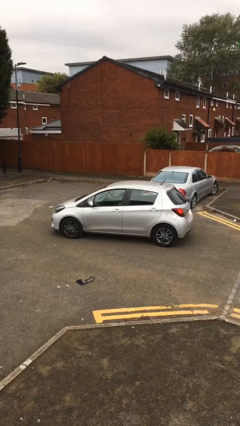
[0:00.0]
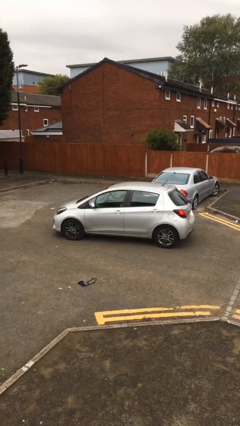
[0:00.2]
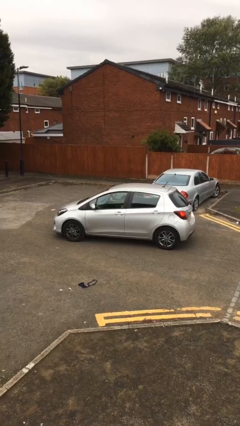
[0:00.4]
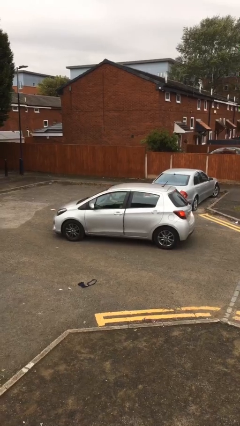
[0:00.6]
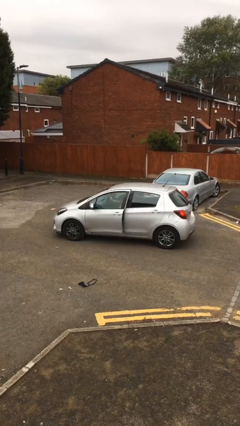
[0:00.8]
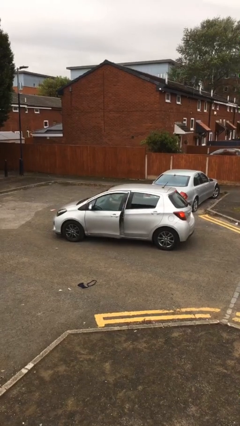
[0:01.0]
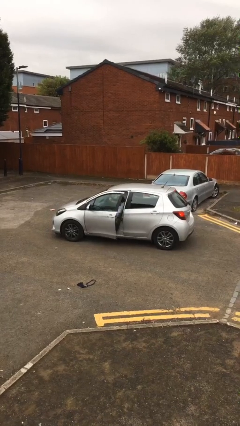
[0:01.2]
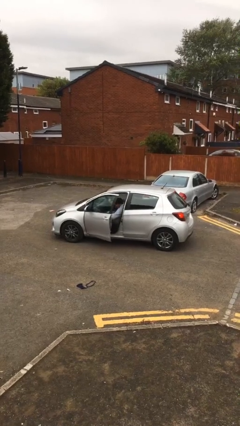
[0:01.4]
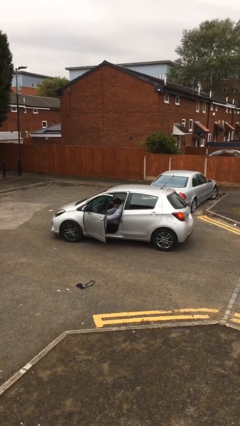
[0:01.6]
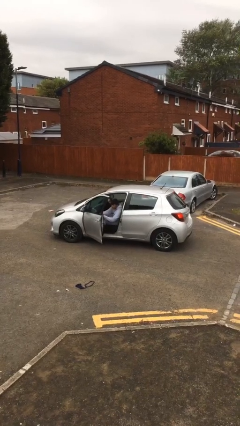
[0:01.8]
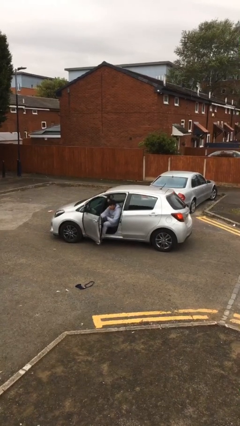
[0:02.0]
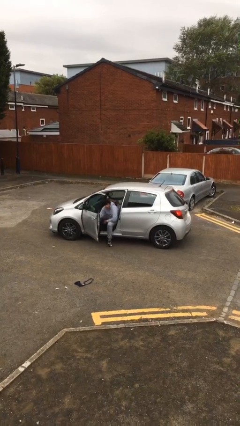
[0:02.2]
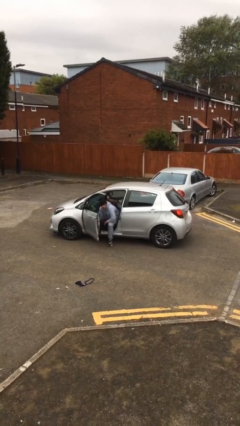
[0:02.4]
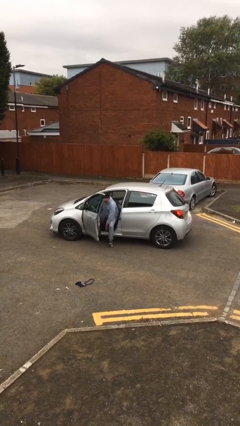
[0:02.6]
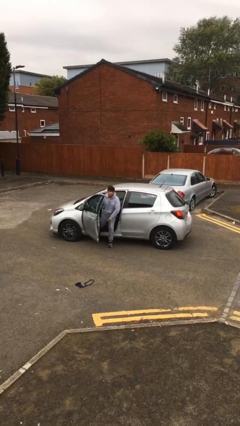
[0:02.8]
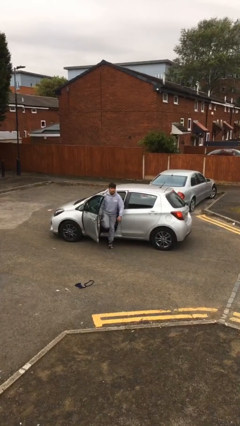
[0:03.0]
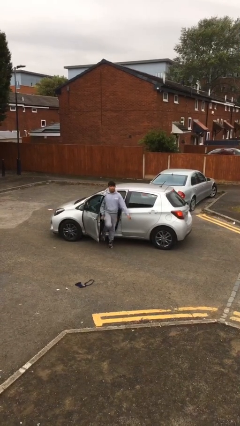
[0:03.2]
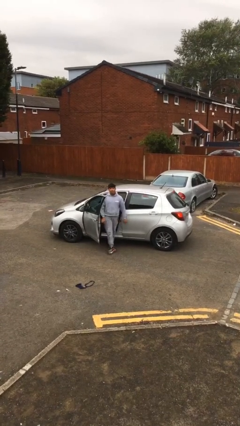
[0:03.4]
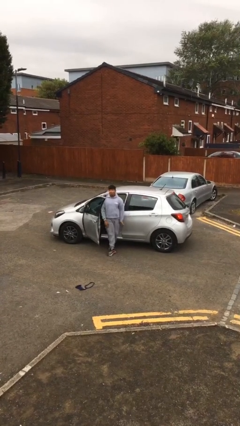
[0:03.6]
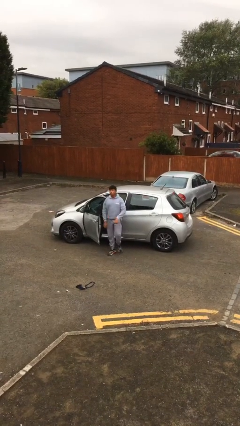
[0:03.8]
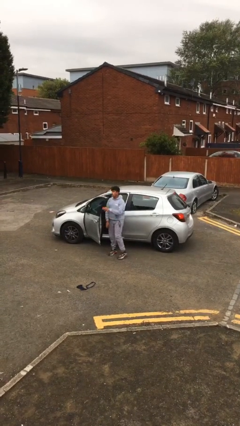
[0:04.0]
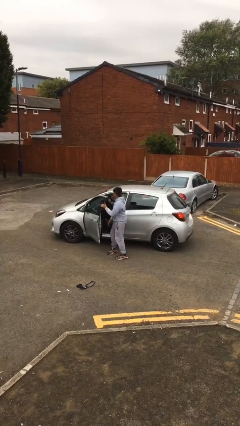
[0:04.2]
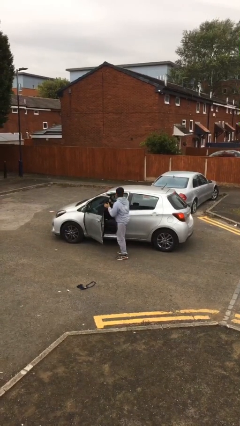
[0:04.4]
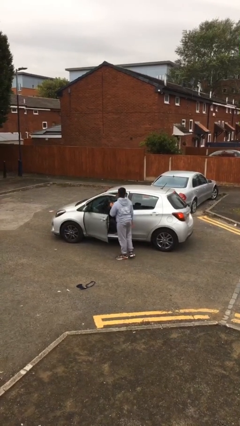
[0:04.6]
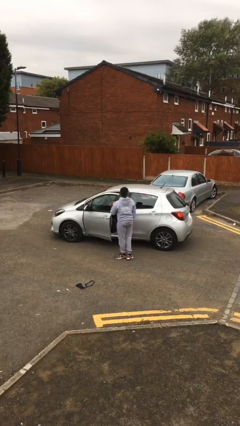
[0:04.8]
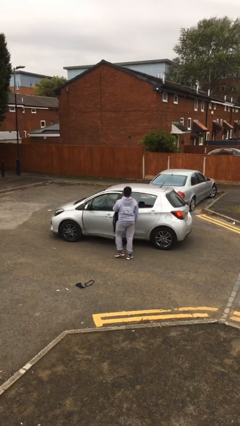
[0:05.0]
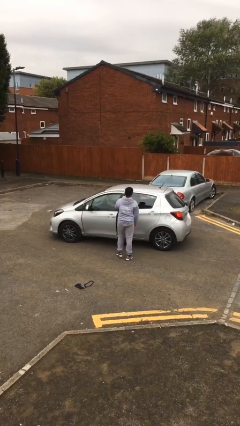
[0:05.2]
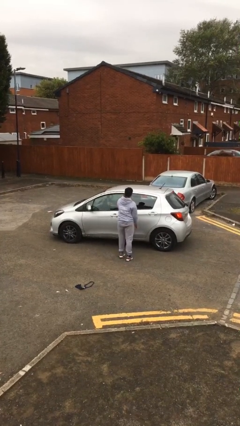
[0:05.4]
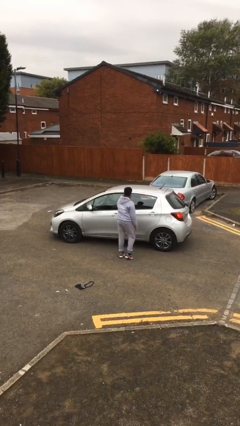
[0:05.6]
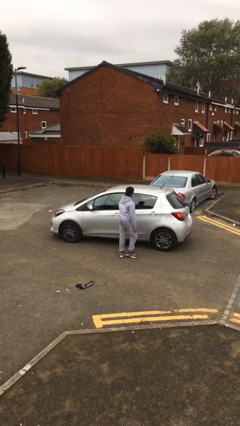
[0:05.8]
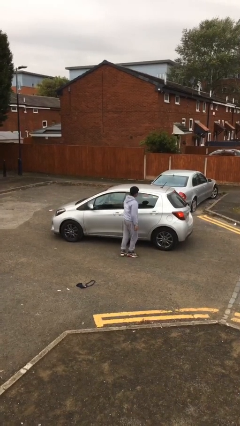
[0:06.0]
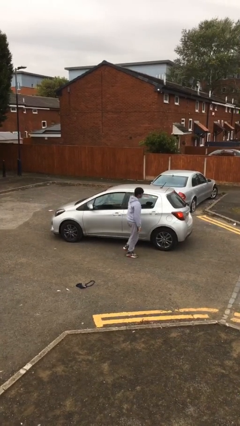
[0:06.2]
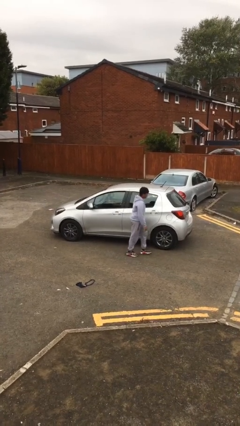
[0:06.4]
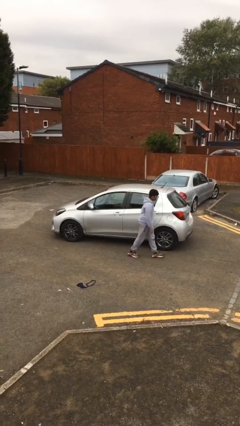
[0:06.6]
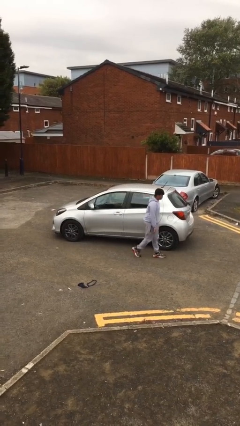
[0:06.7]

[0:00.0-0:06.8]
car drops off person

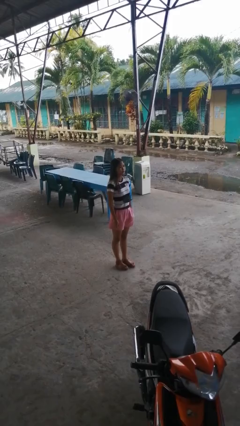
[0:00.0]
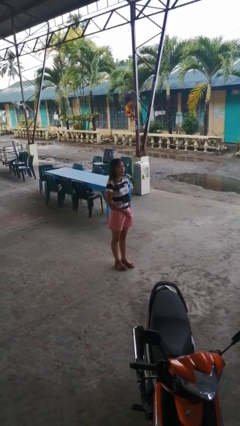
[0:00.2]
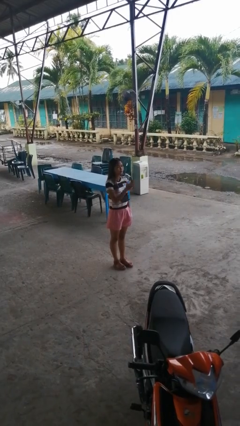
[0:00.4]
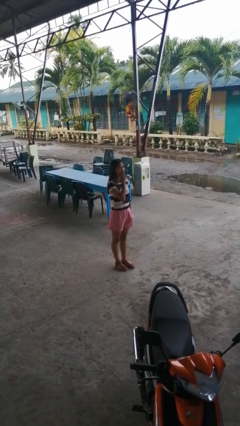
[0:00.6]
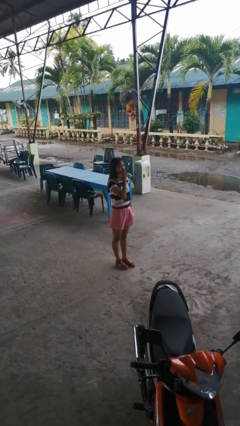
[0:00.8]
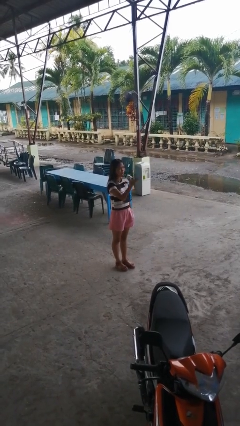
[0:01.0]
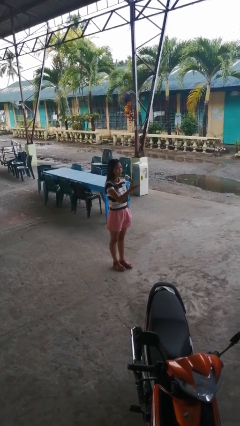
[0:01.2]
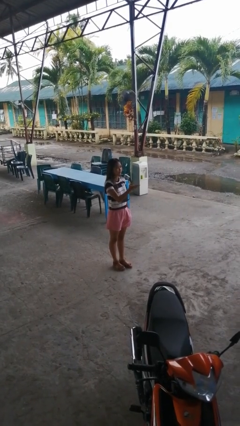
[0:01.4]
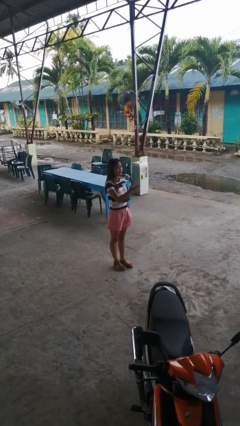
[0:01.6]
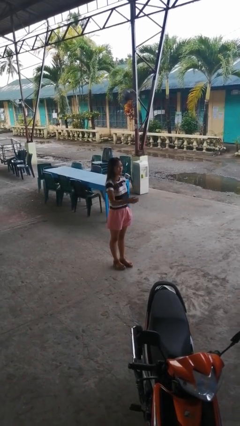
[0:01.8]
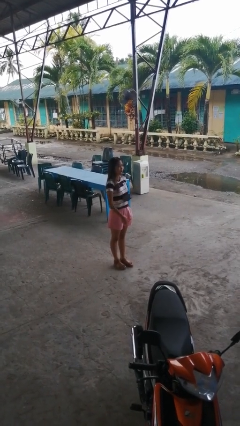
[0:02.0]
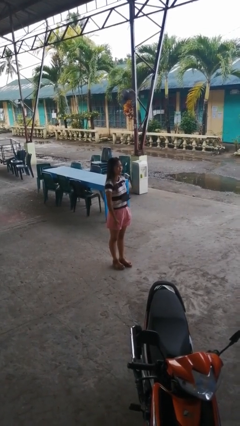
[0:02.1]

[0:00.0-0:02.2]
person gestures blow kiss

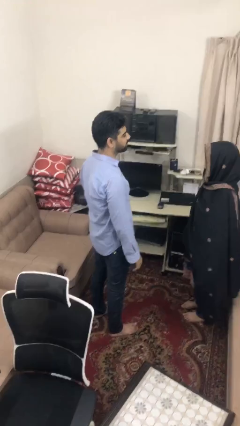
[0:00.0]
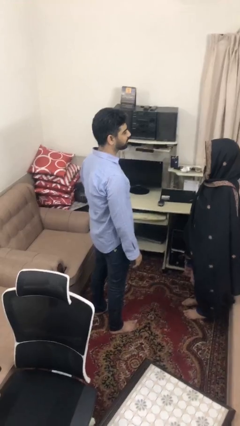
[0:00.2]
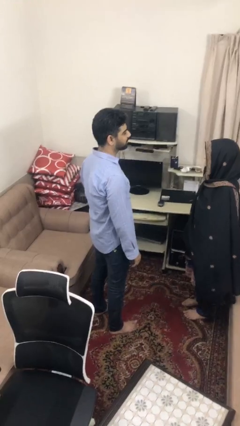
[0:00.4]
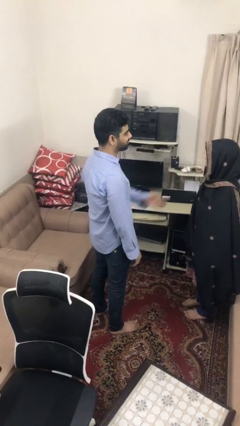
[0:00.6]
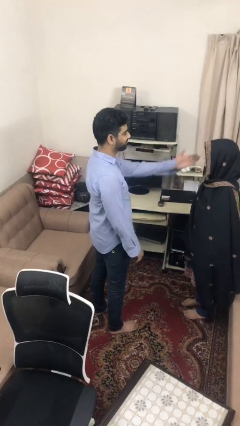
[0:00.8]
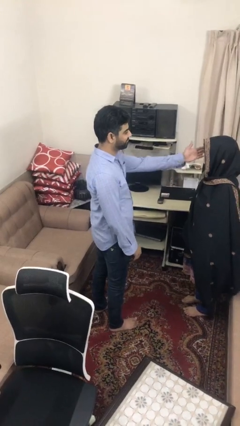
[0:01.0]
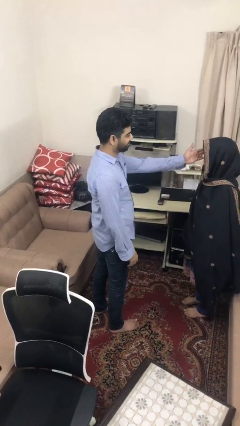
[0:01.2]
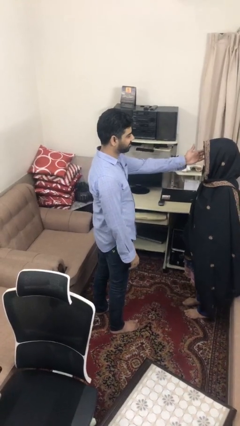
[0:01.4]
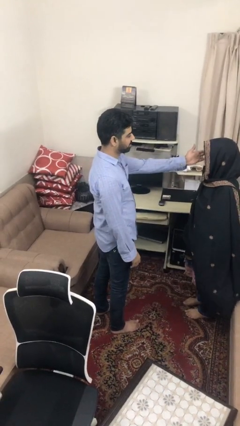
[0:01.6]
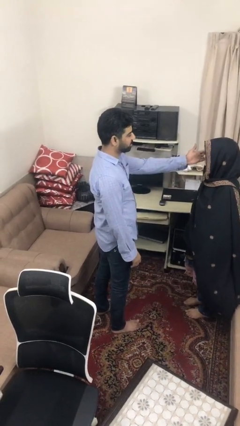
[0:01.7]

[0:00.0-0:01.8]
person touches face of person

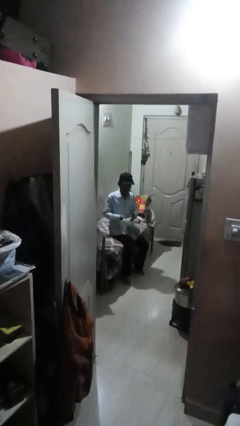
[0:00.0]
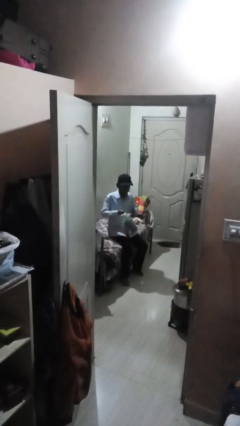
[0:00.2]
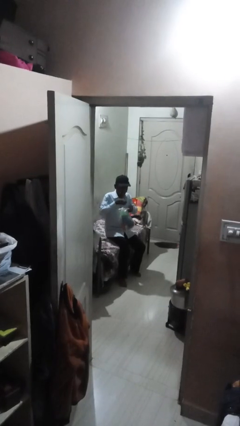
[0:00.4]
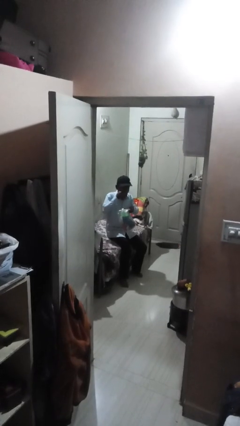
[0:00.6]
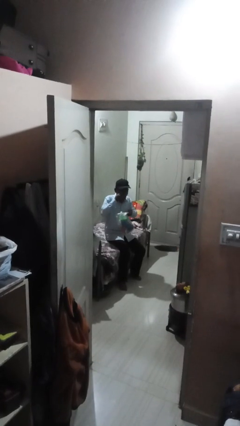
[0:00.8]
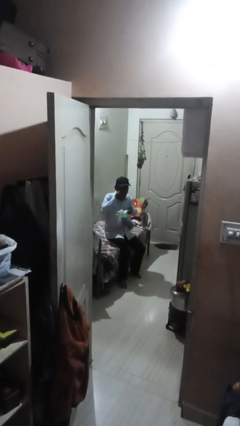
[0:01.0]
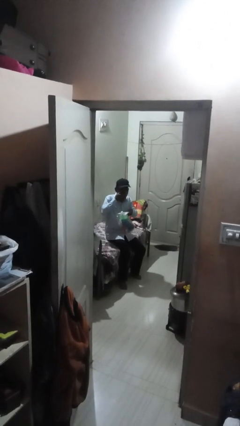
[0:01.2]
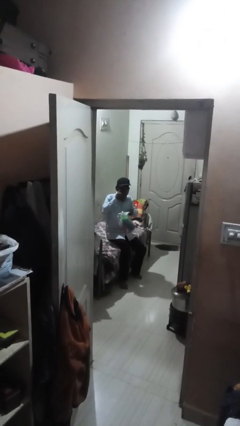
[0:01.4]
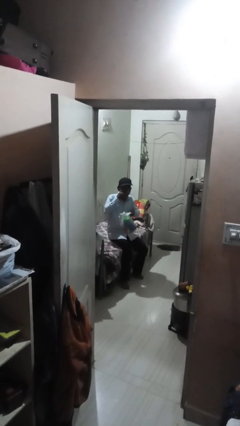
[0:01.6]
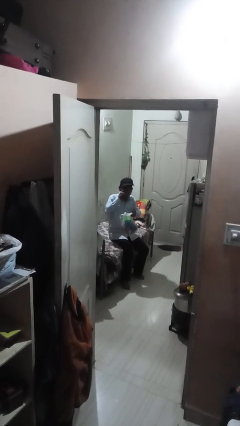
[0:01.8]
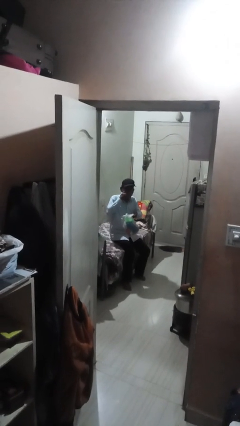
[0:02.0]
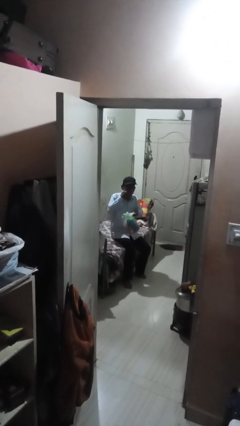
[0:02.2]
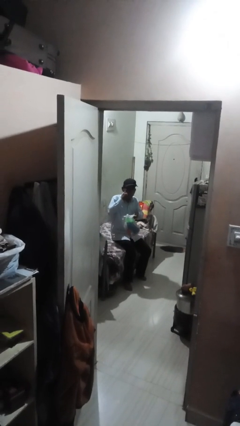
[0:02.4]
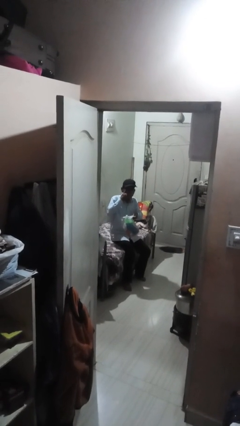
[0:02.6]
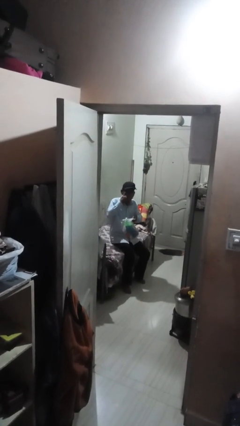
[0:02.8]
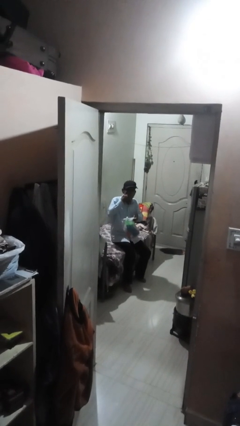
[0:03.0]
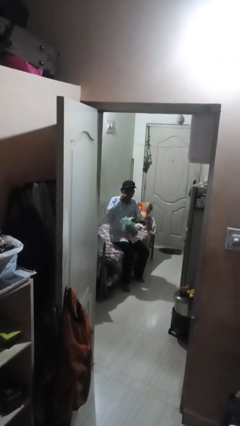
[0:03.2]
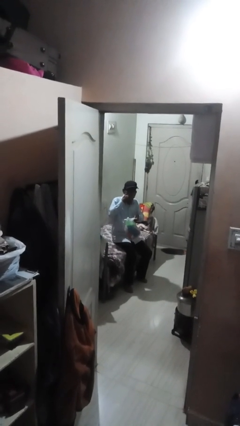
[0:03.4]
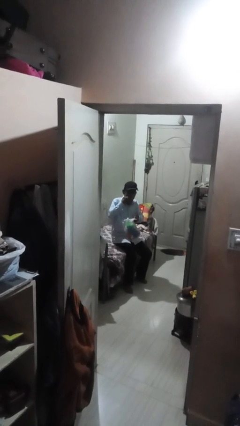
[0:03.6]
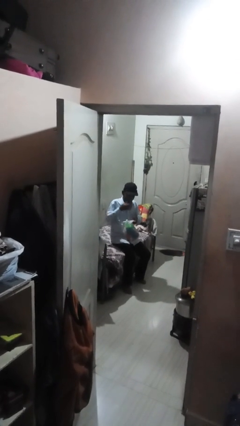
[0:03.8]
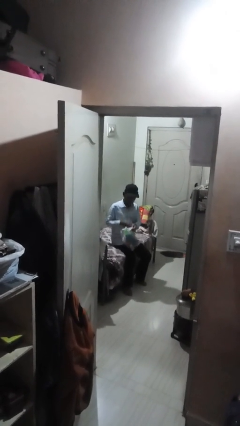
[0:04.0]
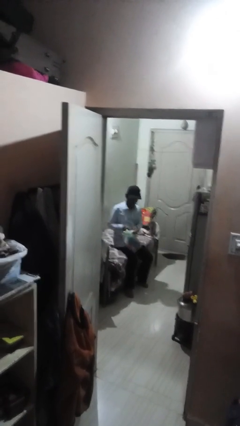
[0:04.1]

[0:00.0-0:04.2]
person eats snack from bag

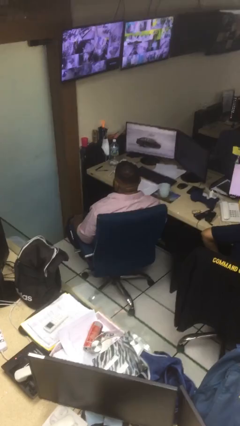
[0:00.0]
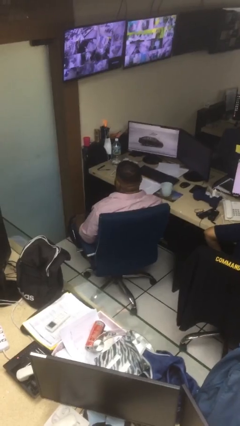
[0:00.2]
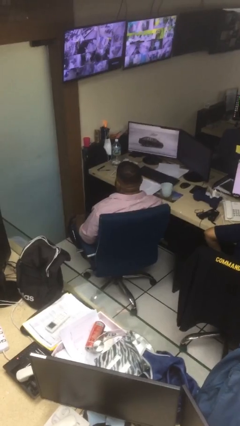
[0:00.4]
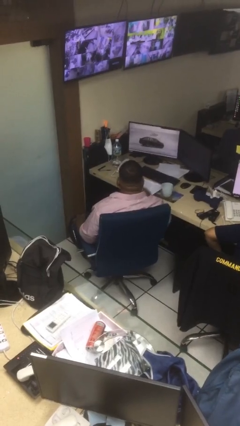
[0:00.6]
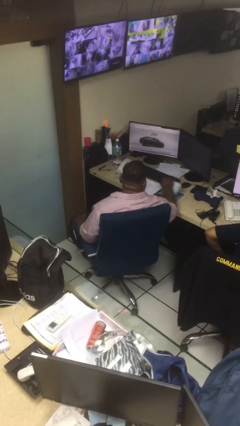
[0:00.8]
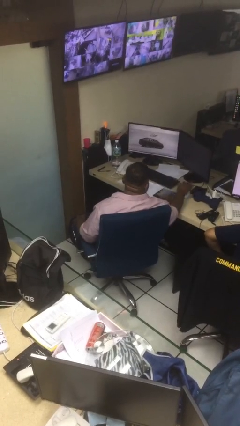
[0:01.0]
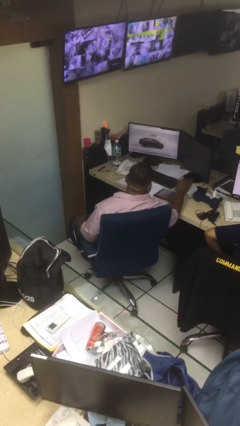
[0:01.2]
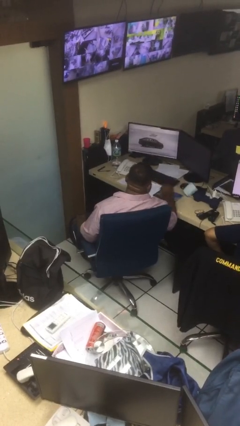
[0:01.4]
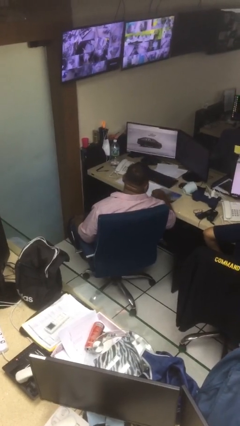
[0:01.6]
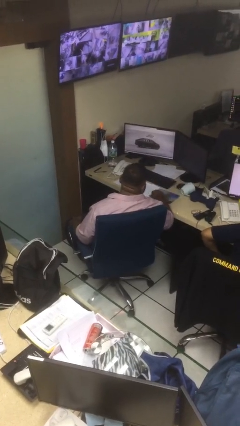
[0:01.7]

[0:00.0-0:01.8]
person knocks over glass

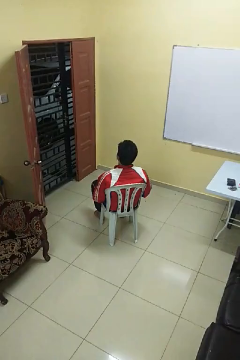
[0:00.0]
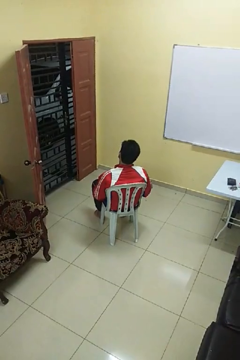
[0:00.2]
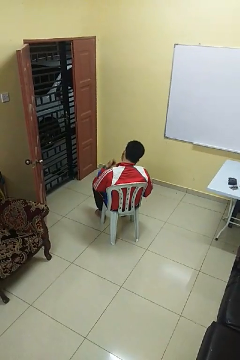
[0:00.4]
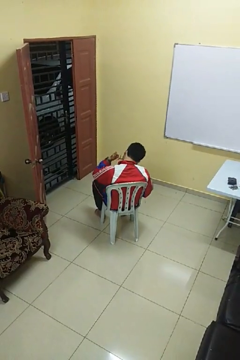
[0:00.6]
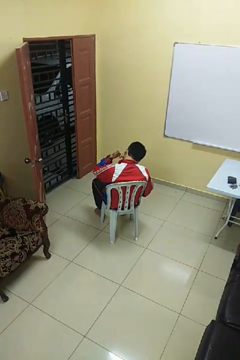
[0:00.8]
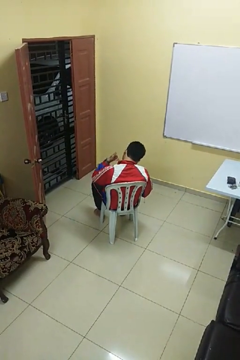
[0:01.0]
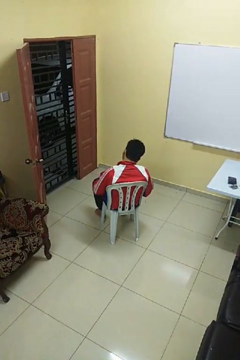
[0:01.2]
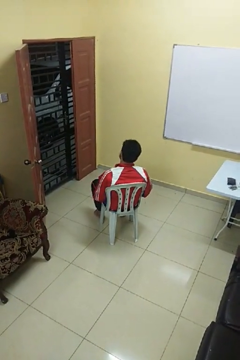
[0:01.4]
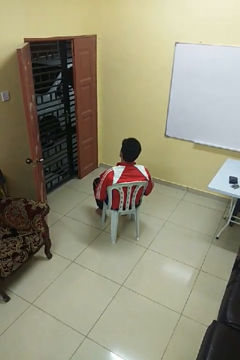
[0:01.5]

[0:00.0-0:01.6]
person gestures call me
